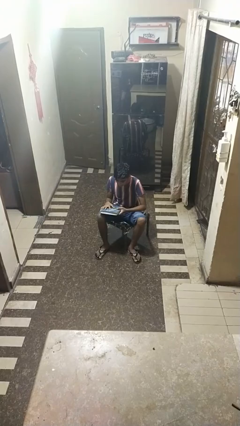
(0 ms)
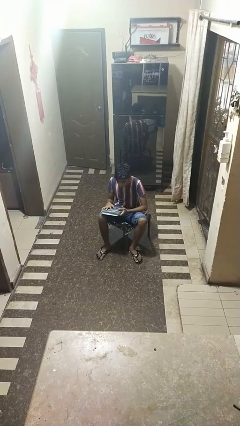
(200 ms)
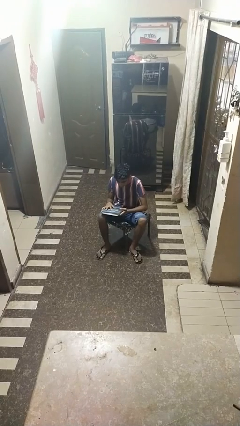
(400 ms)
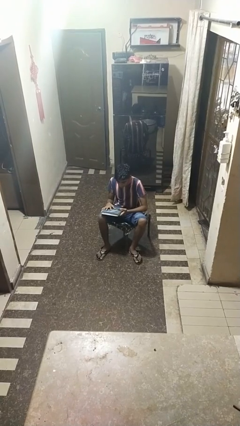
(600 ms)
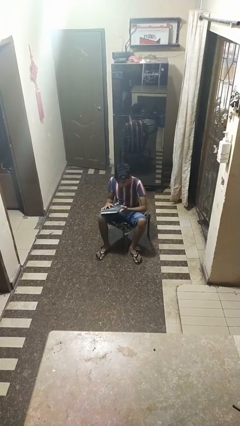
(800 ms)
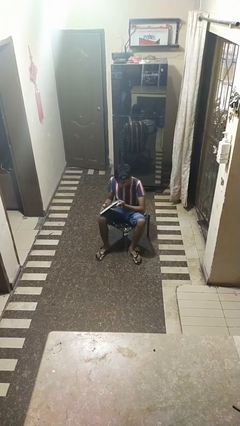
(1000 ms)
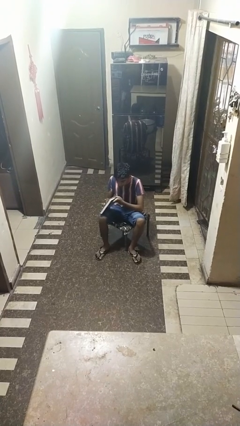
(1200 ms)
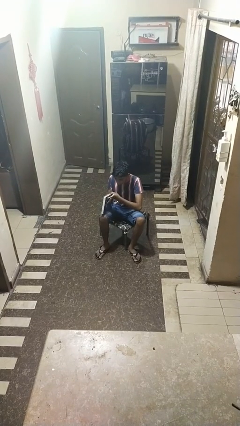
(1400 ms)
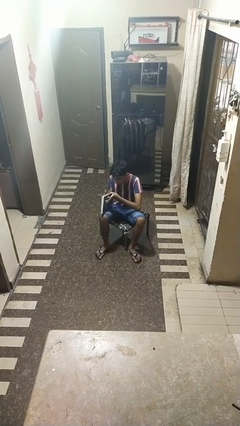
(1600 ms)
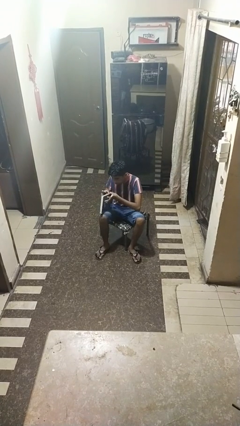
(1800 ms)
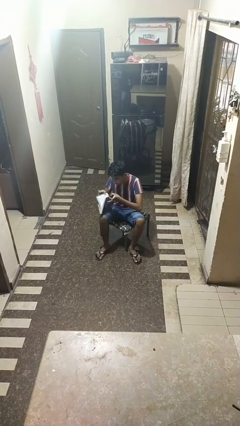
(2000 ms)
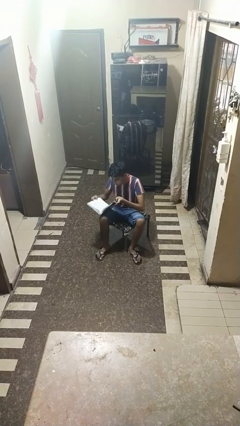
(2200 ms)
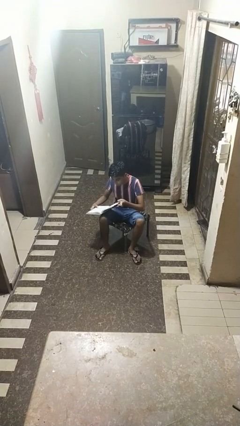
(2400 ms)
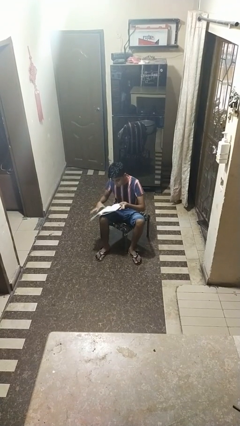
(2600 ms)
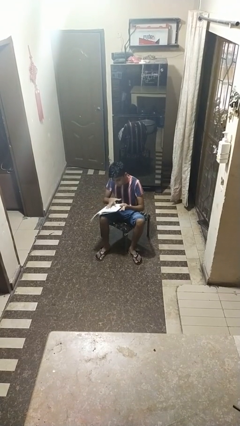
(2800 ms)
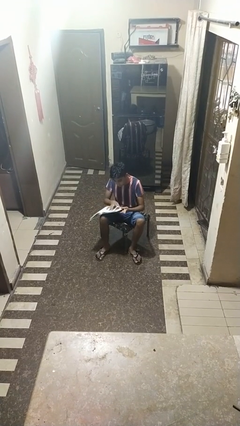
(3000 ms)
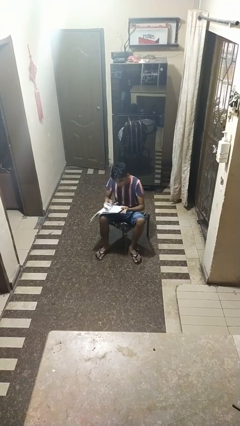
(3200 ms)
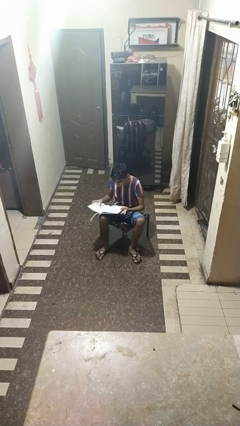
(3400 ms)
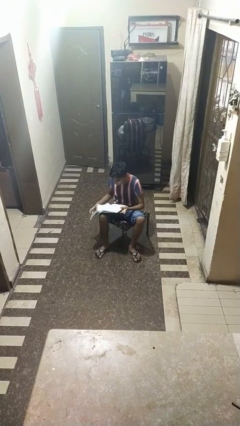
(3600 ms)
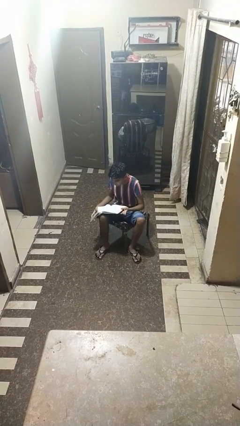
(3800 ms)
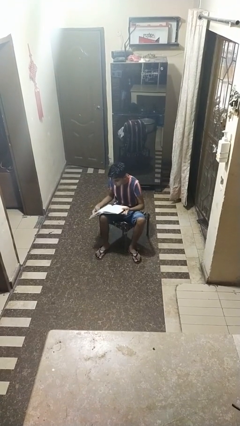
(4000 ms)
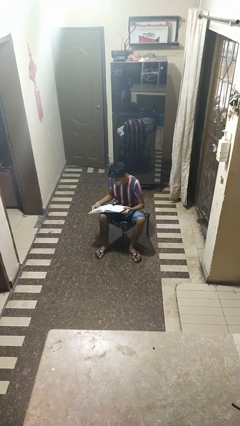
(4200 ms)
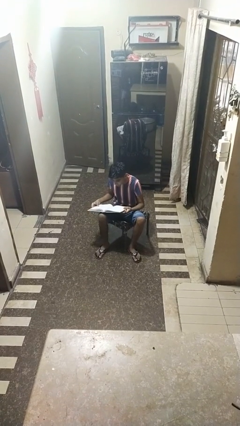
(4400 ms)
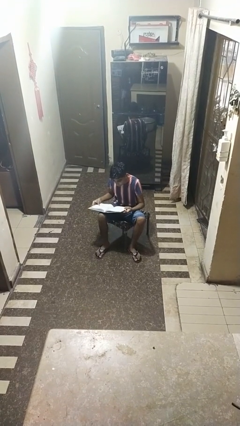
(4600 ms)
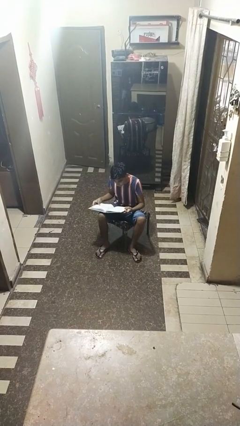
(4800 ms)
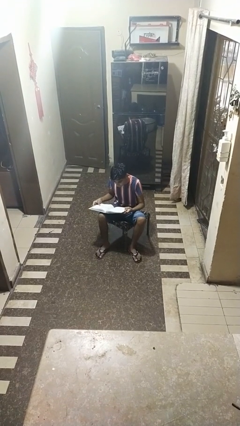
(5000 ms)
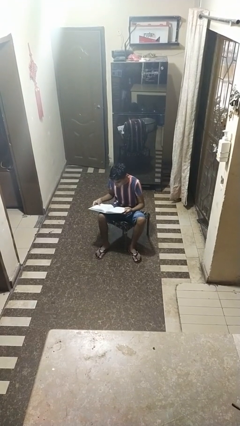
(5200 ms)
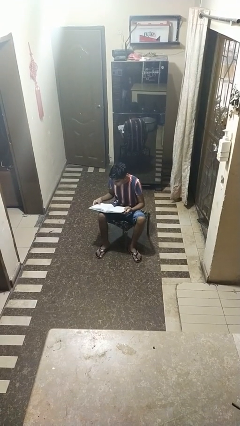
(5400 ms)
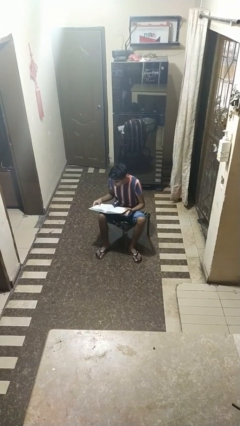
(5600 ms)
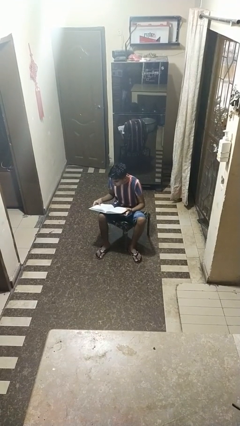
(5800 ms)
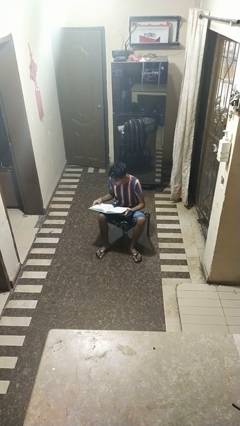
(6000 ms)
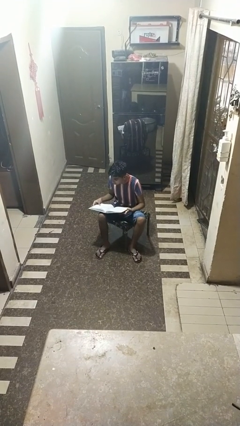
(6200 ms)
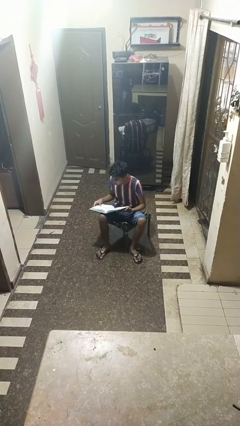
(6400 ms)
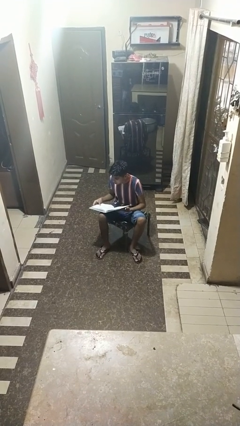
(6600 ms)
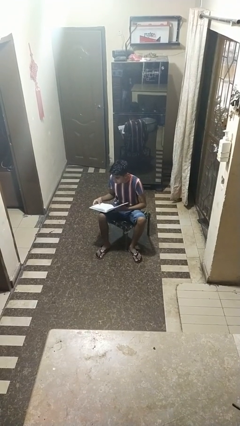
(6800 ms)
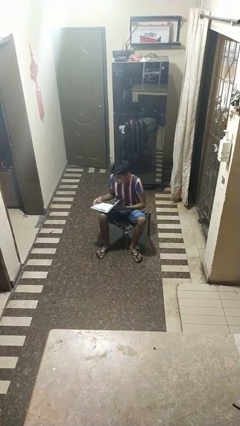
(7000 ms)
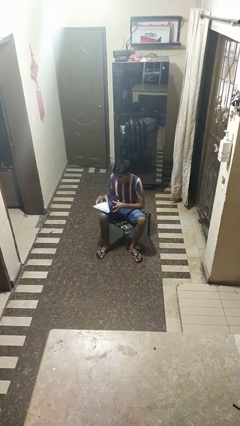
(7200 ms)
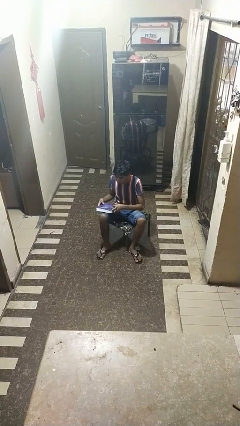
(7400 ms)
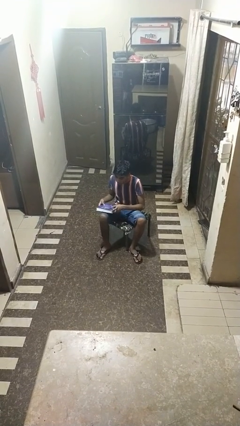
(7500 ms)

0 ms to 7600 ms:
person reads book

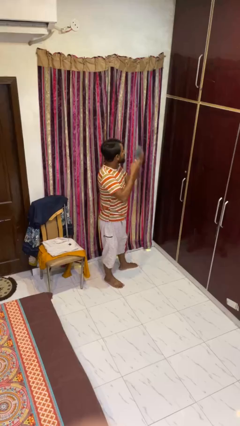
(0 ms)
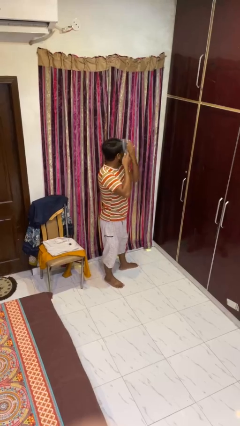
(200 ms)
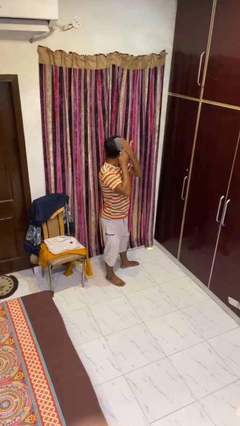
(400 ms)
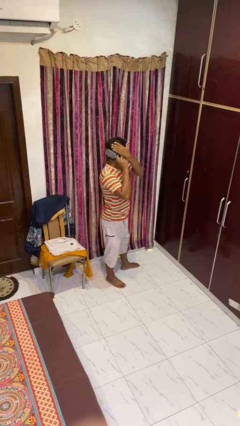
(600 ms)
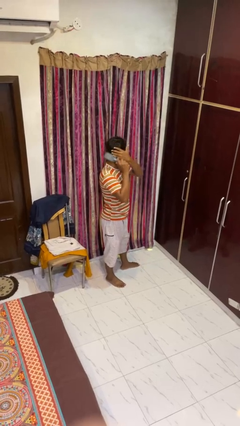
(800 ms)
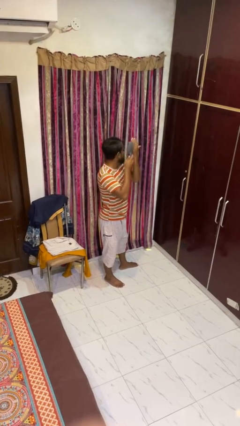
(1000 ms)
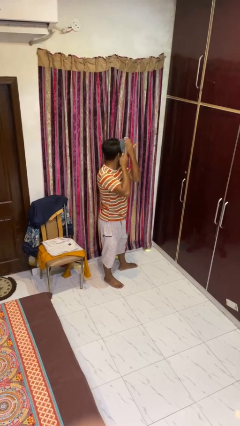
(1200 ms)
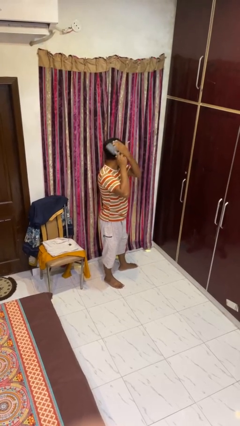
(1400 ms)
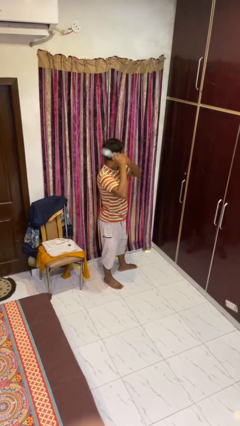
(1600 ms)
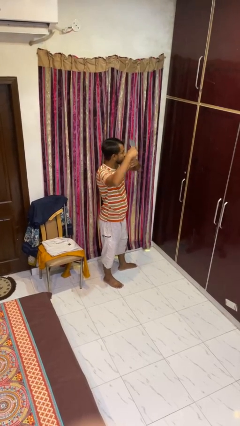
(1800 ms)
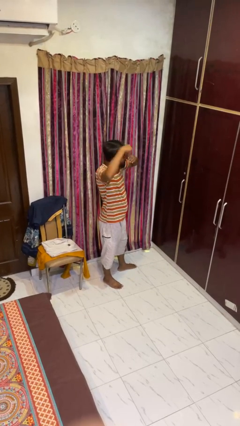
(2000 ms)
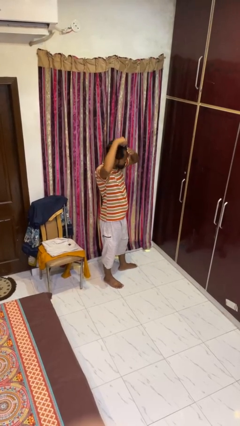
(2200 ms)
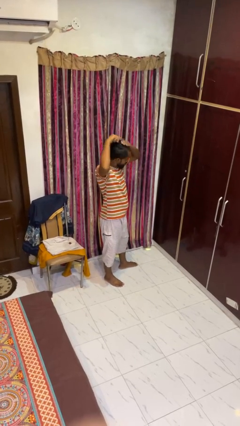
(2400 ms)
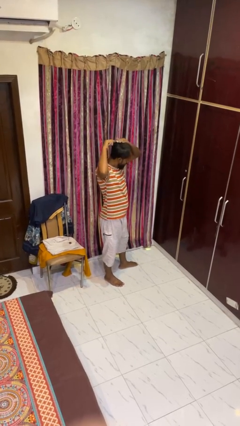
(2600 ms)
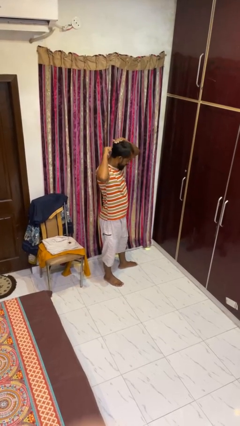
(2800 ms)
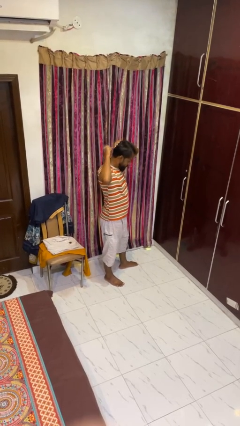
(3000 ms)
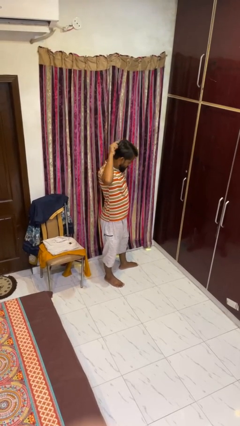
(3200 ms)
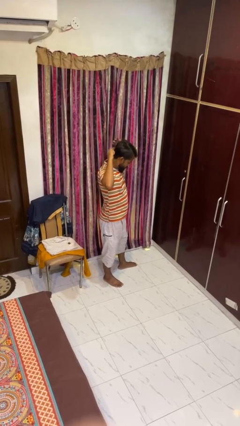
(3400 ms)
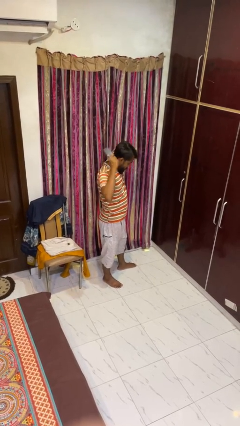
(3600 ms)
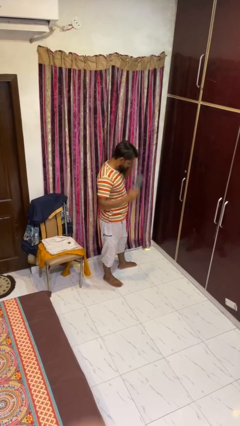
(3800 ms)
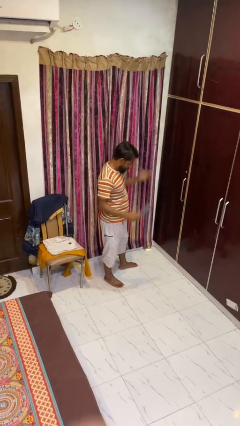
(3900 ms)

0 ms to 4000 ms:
person brushes hair

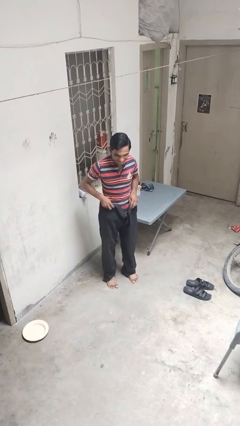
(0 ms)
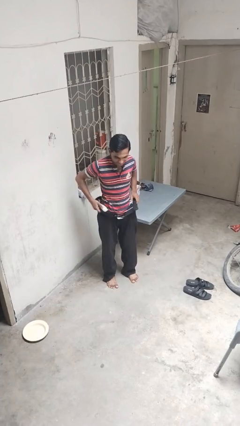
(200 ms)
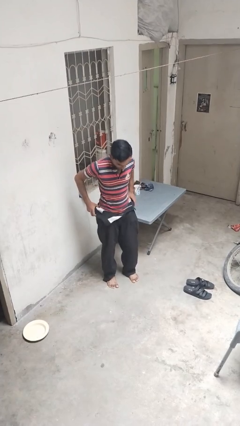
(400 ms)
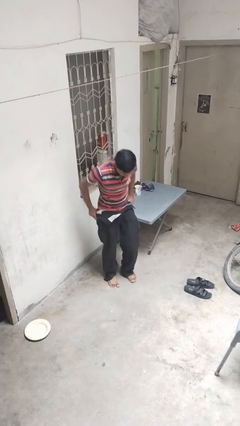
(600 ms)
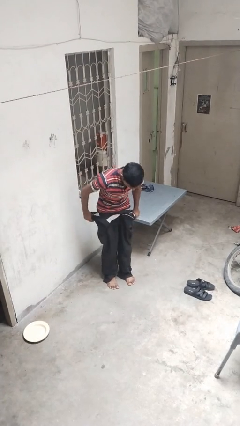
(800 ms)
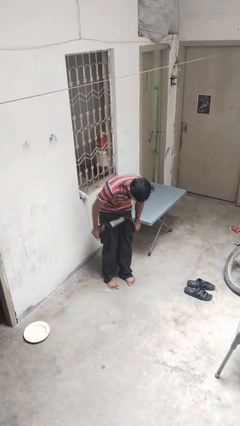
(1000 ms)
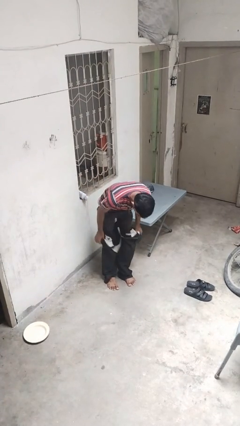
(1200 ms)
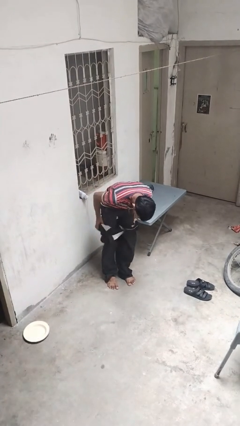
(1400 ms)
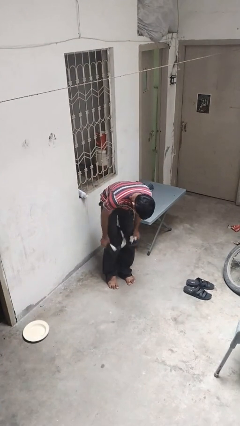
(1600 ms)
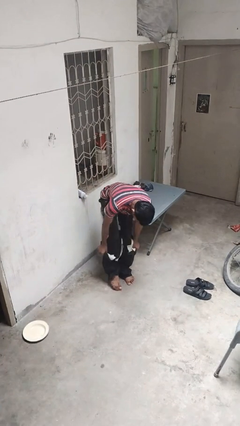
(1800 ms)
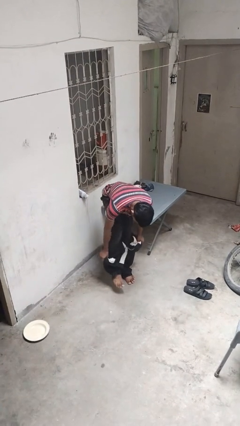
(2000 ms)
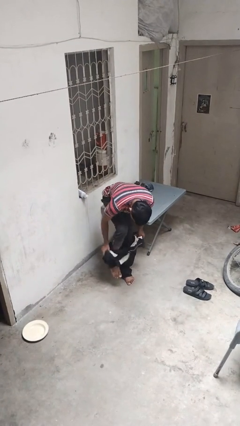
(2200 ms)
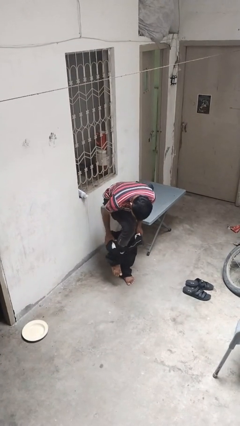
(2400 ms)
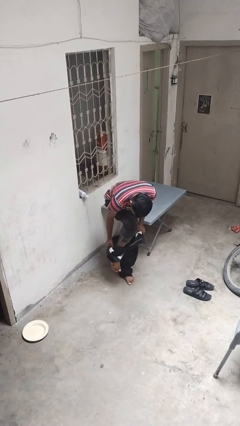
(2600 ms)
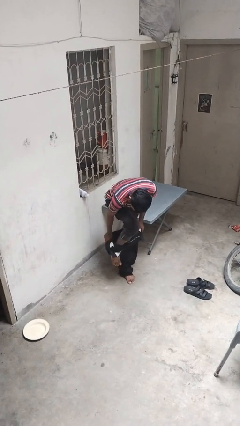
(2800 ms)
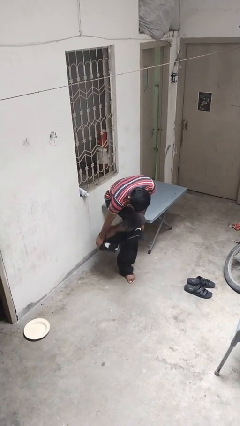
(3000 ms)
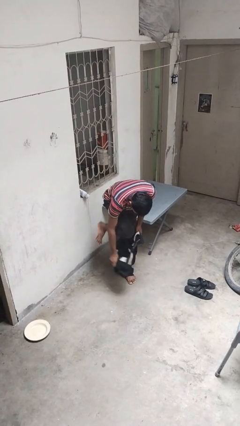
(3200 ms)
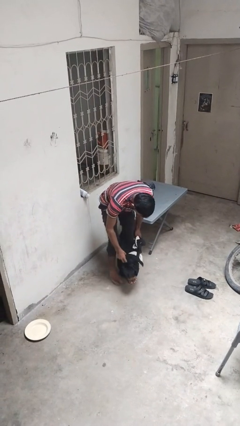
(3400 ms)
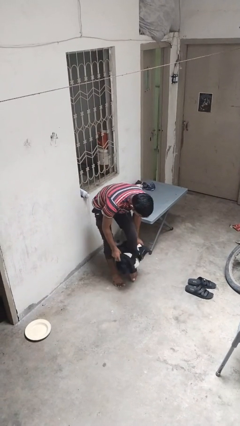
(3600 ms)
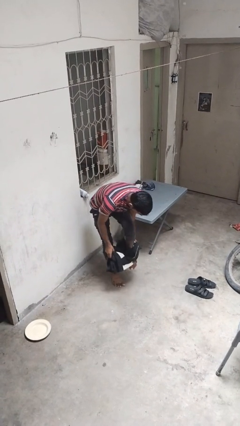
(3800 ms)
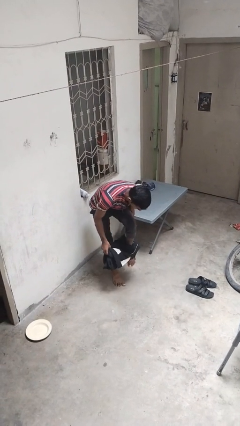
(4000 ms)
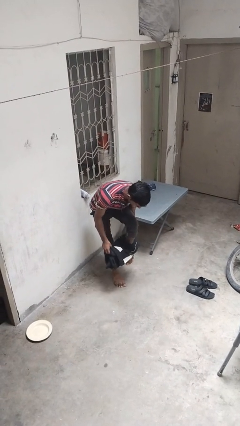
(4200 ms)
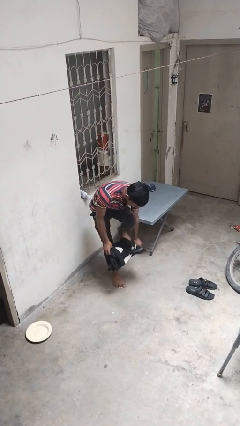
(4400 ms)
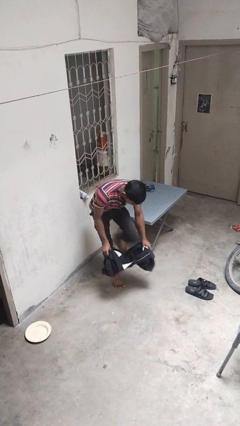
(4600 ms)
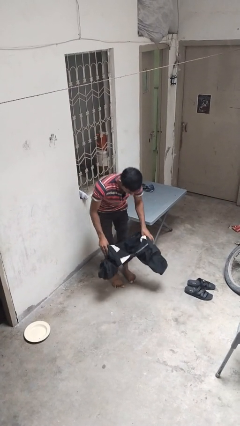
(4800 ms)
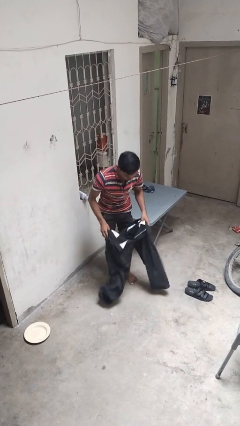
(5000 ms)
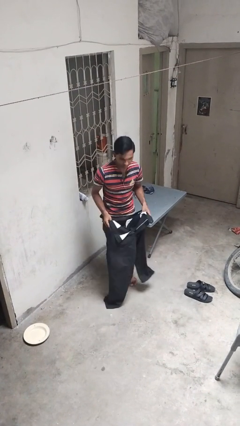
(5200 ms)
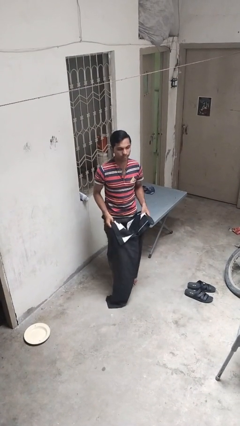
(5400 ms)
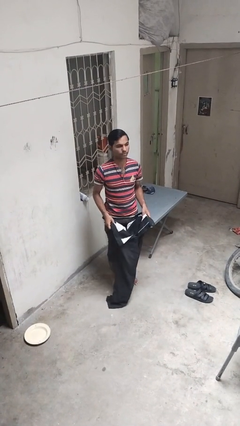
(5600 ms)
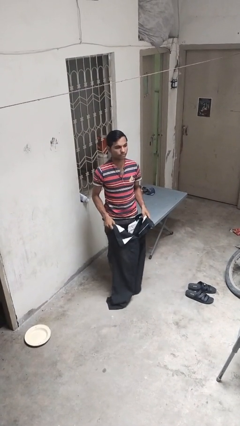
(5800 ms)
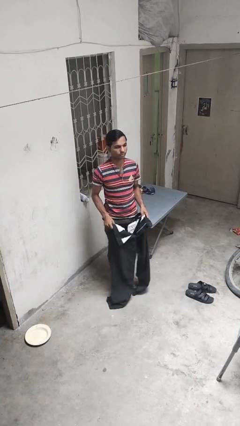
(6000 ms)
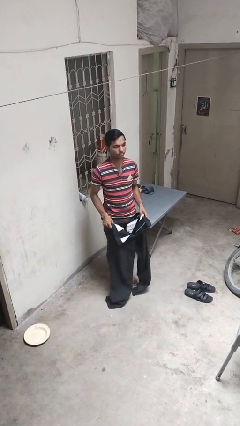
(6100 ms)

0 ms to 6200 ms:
person takes off pants

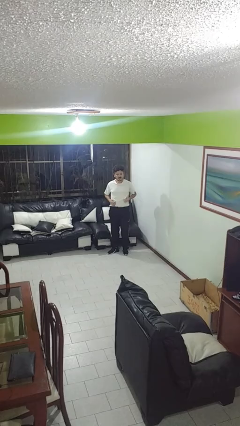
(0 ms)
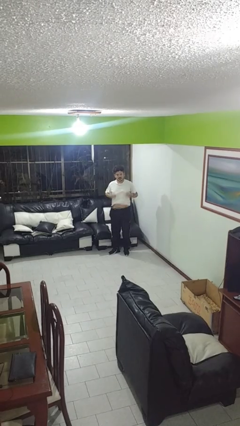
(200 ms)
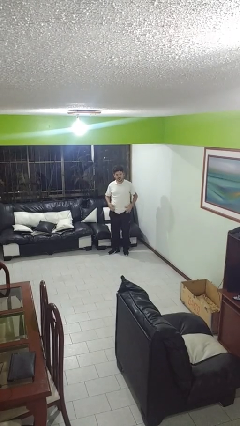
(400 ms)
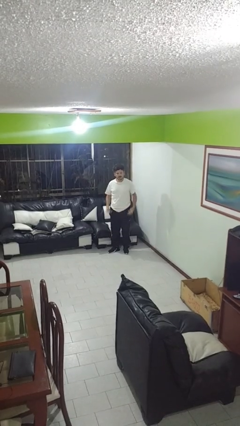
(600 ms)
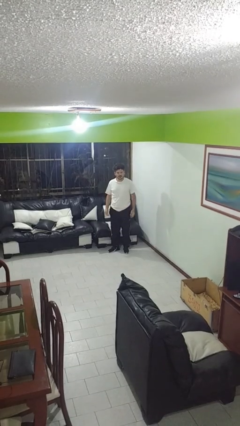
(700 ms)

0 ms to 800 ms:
person untucks shirt
